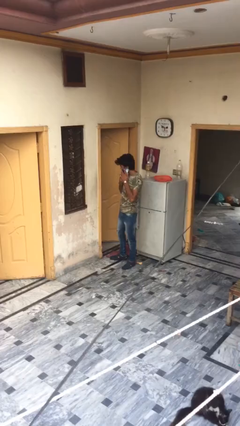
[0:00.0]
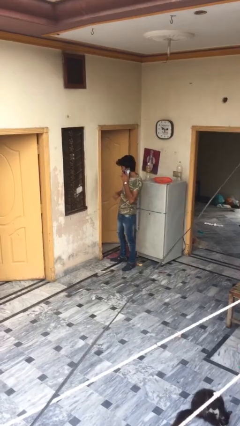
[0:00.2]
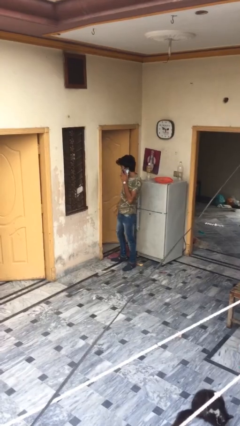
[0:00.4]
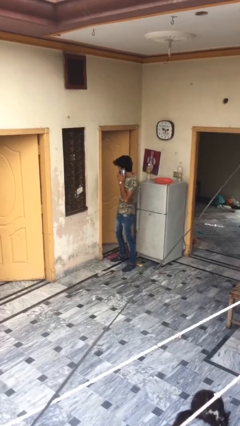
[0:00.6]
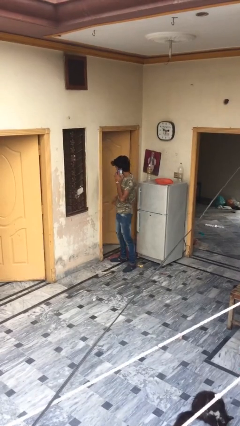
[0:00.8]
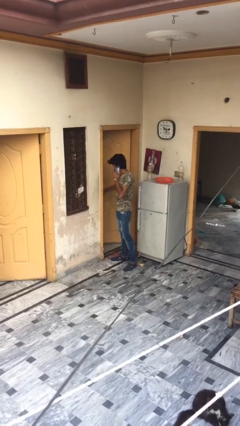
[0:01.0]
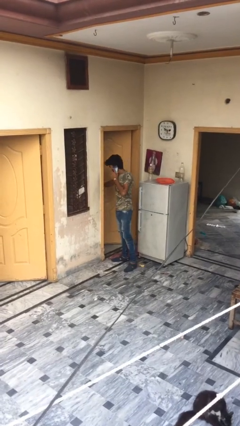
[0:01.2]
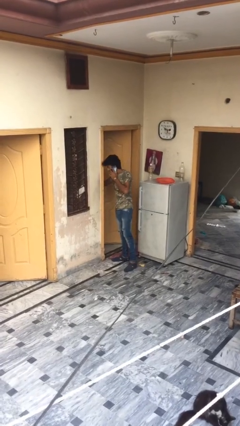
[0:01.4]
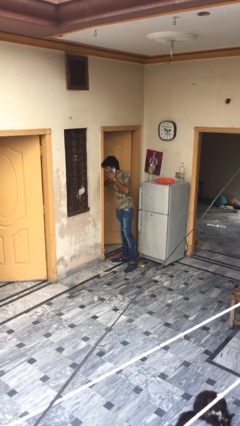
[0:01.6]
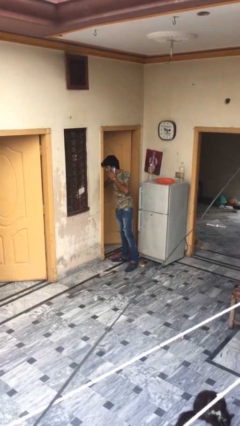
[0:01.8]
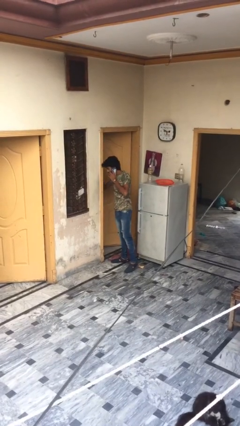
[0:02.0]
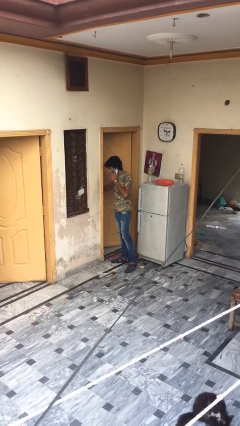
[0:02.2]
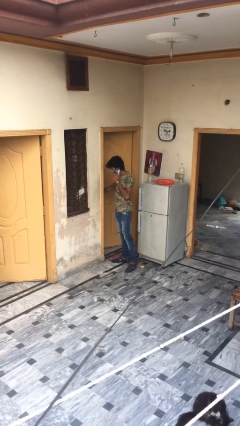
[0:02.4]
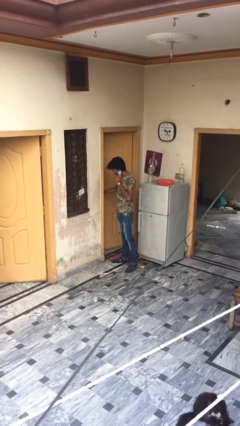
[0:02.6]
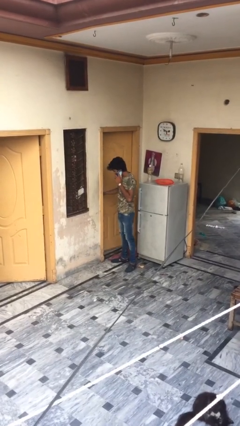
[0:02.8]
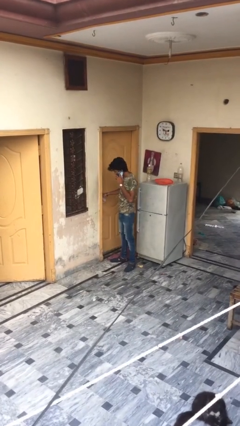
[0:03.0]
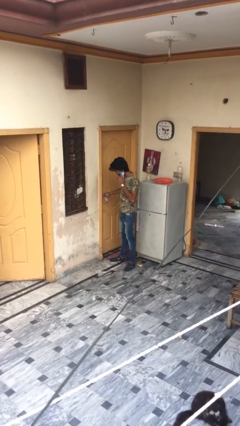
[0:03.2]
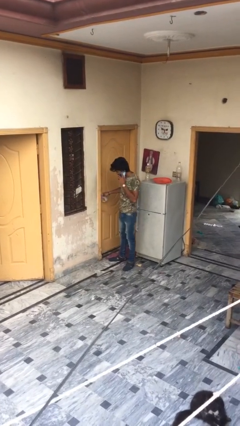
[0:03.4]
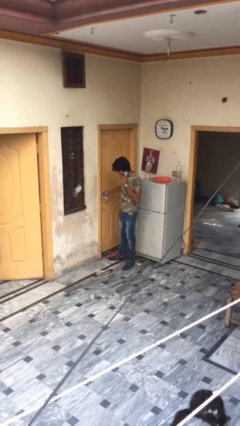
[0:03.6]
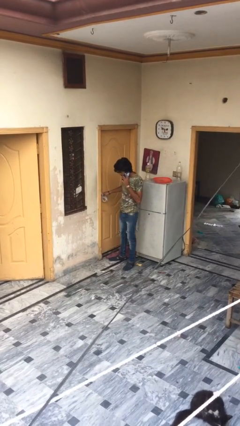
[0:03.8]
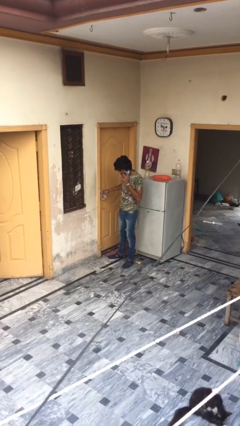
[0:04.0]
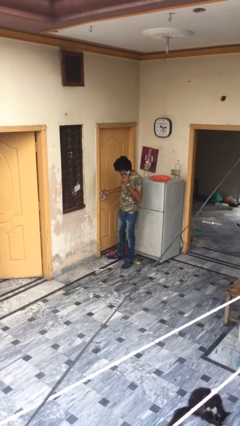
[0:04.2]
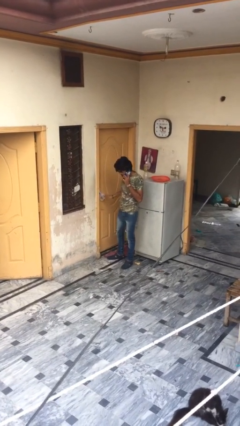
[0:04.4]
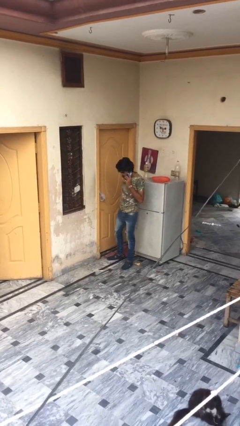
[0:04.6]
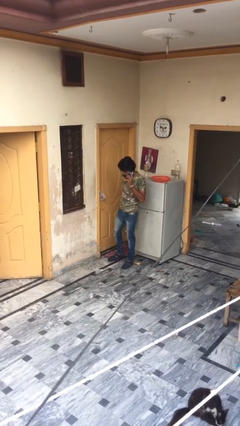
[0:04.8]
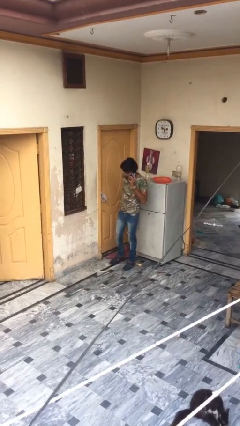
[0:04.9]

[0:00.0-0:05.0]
person closes facility door

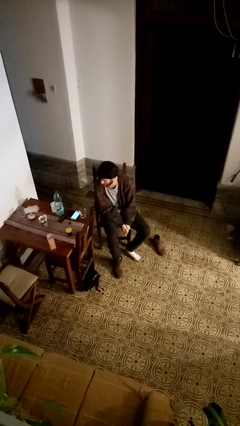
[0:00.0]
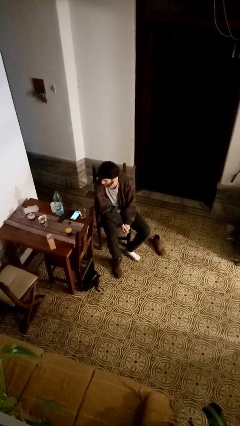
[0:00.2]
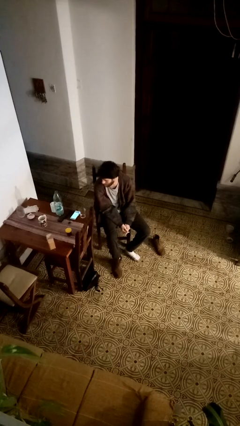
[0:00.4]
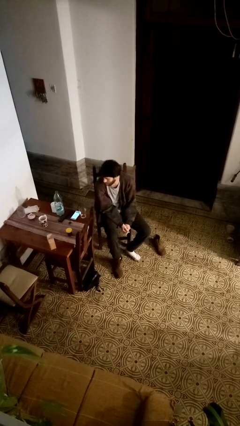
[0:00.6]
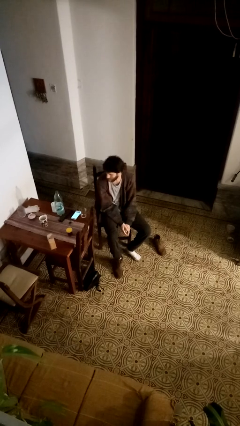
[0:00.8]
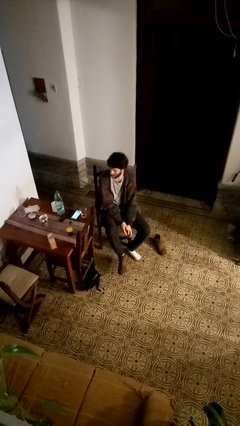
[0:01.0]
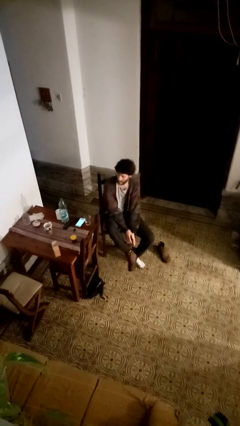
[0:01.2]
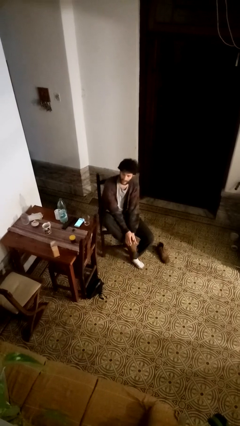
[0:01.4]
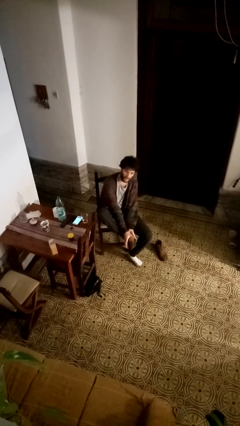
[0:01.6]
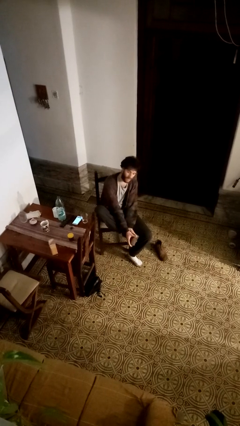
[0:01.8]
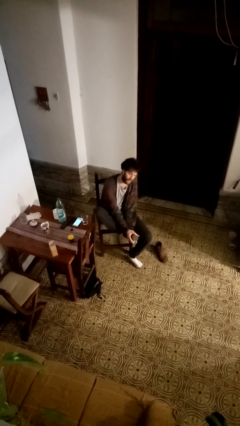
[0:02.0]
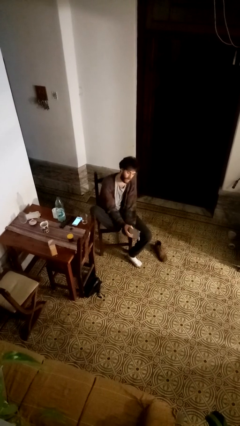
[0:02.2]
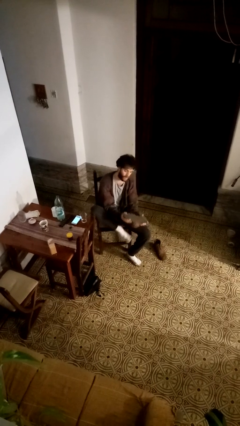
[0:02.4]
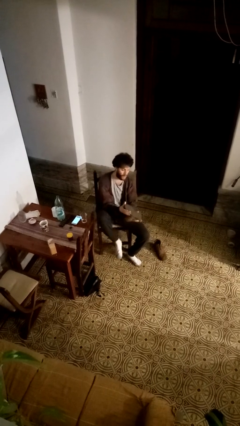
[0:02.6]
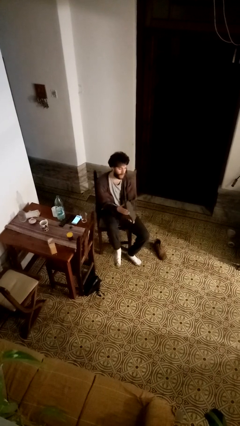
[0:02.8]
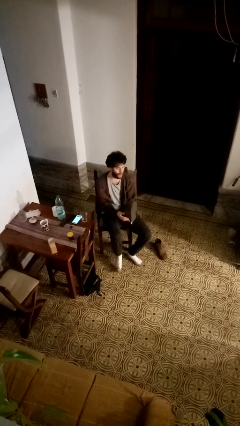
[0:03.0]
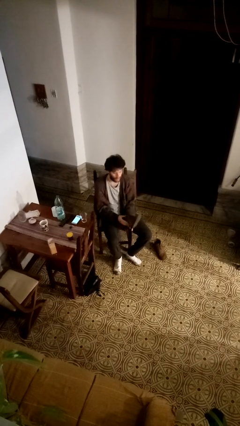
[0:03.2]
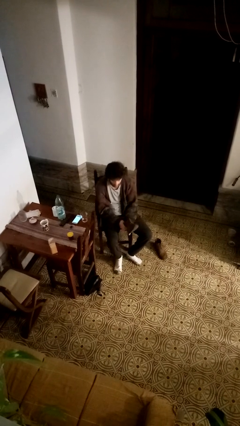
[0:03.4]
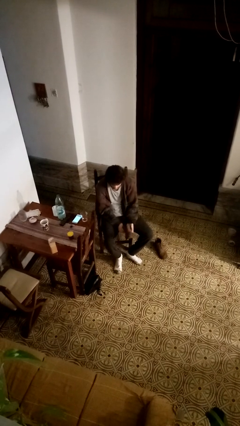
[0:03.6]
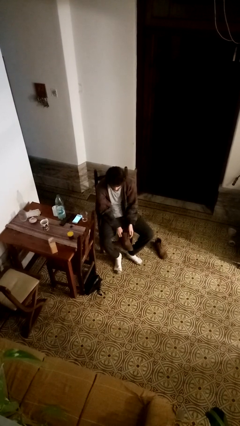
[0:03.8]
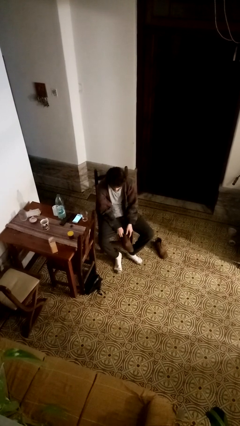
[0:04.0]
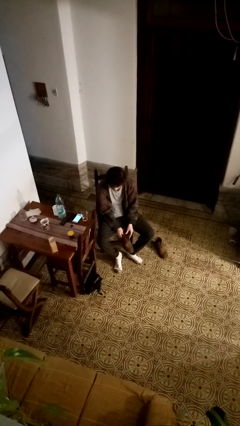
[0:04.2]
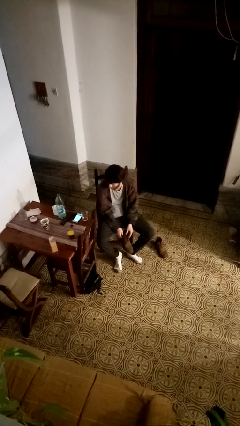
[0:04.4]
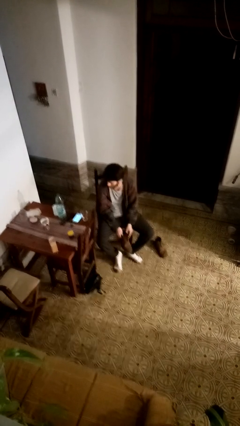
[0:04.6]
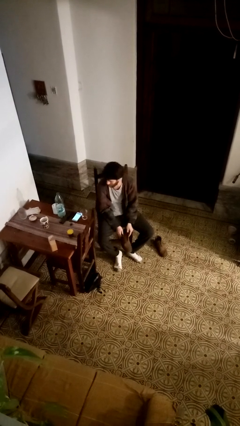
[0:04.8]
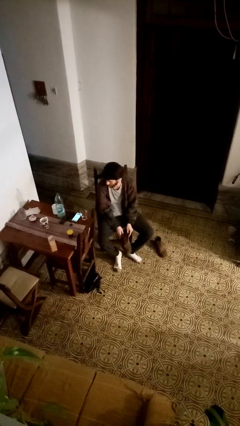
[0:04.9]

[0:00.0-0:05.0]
person takes off boots

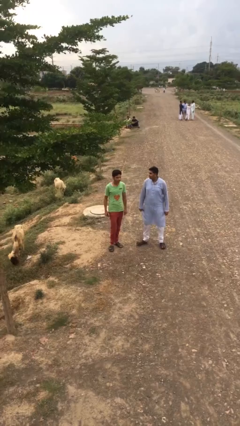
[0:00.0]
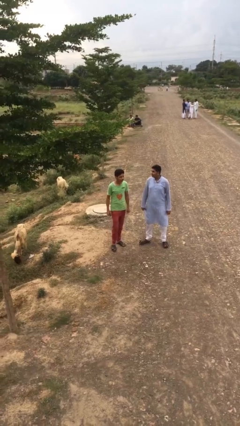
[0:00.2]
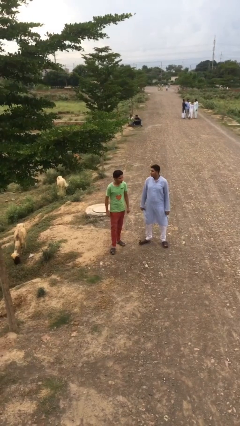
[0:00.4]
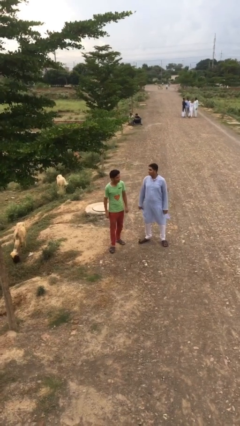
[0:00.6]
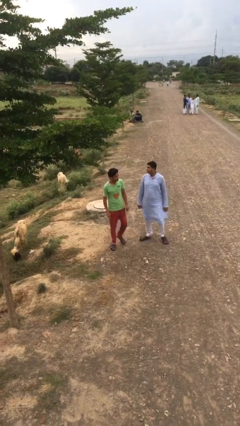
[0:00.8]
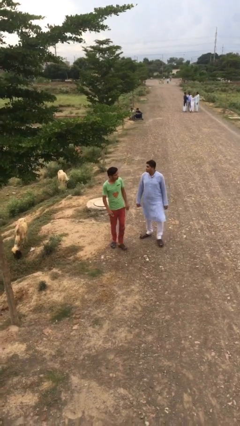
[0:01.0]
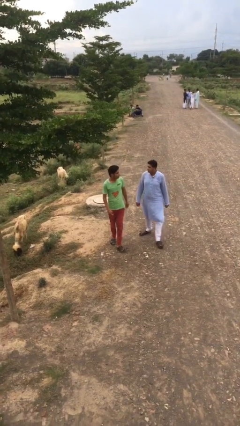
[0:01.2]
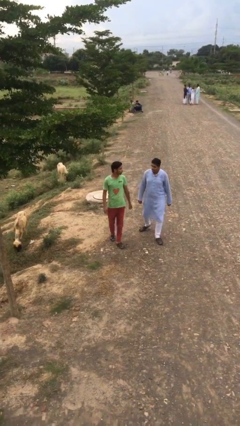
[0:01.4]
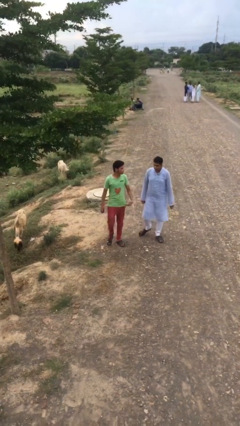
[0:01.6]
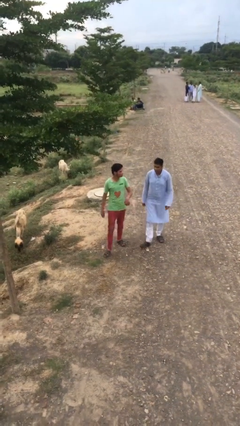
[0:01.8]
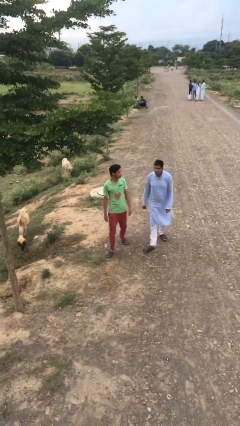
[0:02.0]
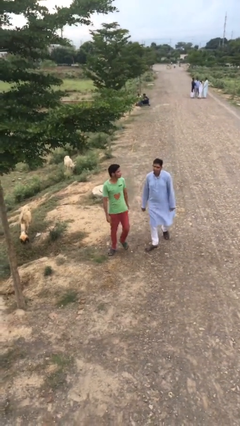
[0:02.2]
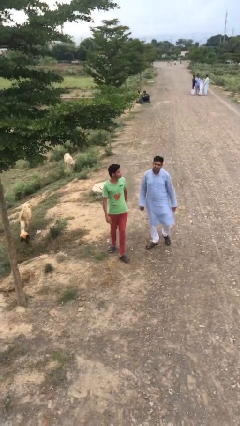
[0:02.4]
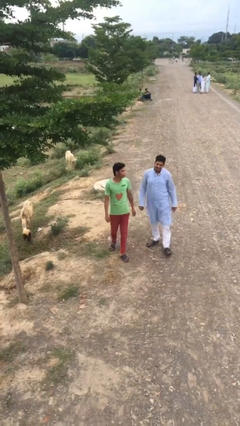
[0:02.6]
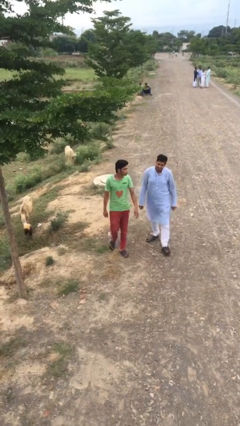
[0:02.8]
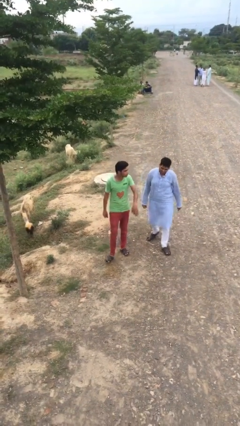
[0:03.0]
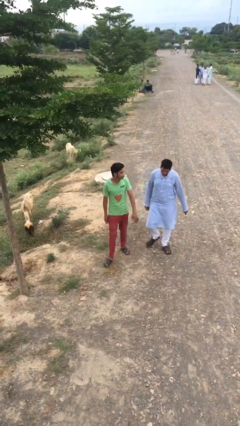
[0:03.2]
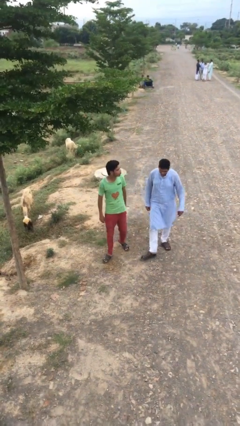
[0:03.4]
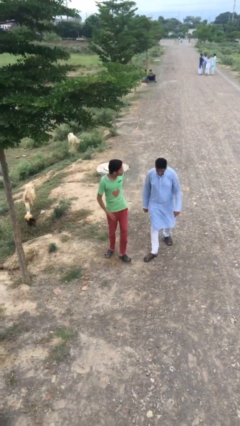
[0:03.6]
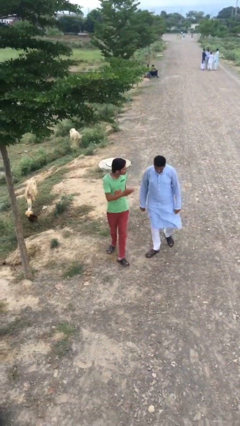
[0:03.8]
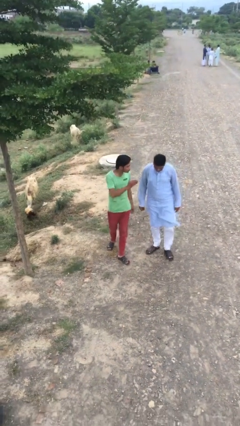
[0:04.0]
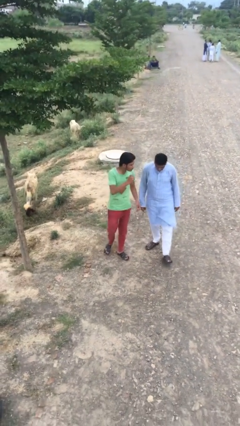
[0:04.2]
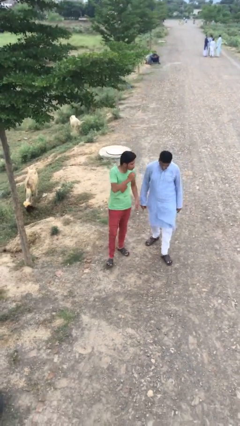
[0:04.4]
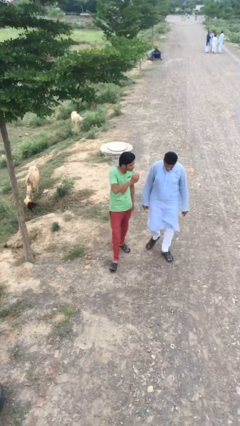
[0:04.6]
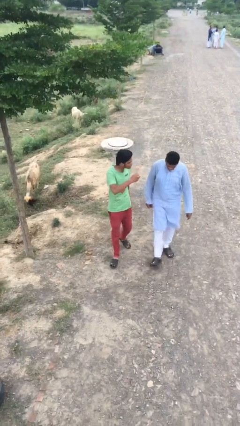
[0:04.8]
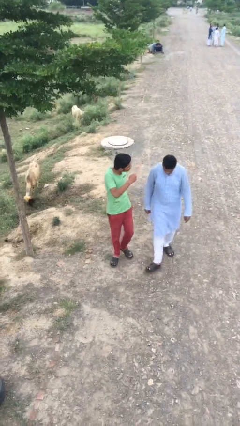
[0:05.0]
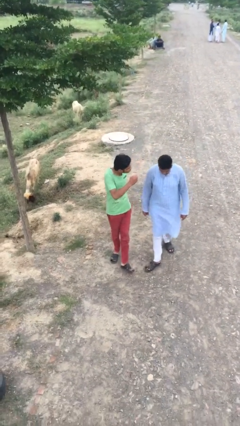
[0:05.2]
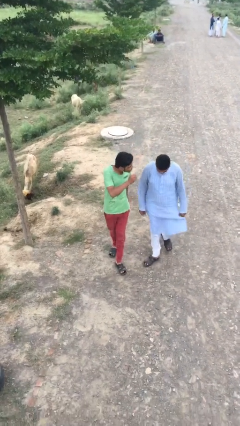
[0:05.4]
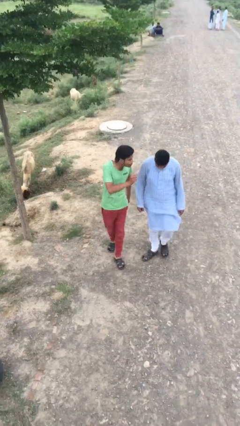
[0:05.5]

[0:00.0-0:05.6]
person talks to person

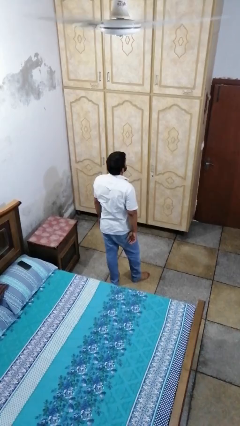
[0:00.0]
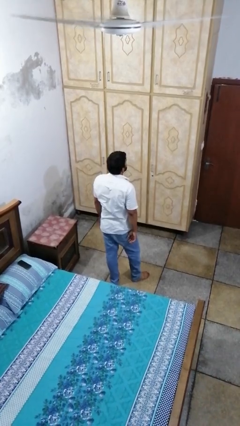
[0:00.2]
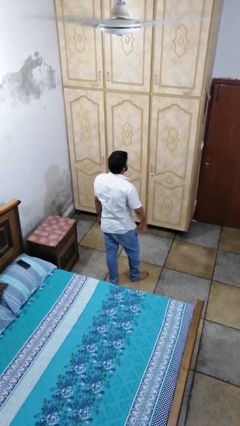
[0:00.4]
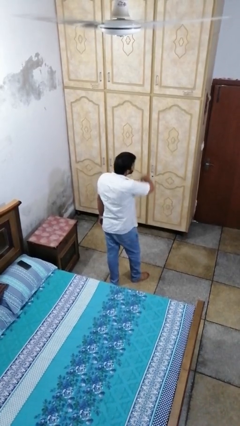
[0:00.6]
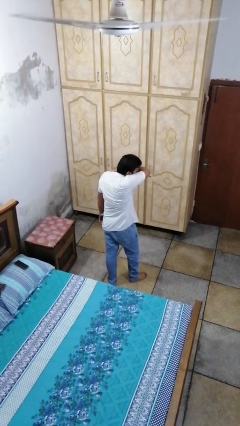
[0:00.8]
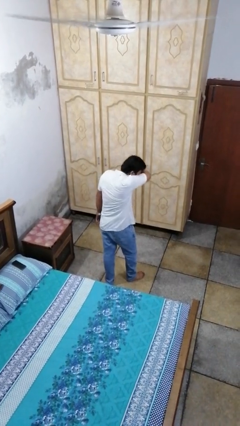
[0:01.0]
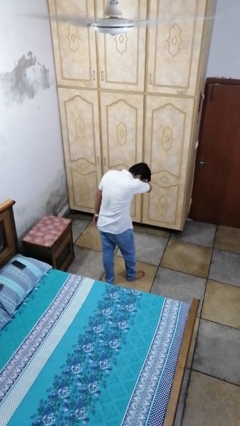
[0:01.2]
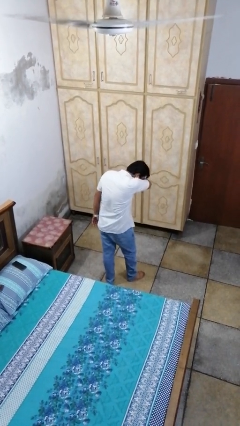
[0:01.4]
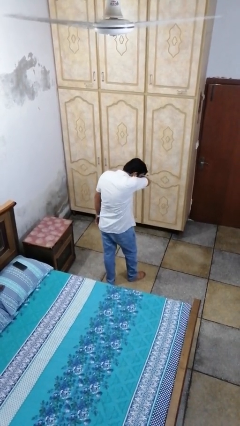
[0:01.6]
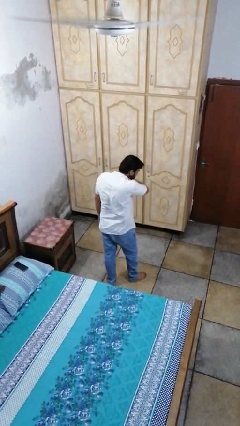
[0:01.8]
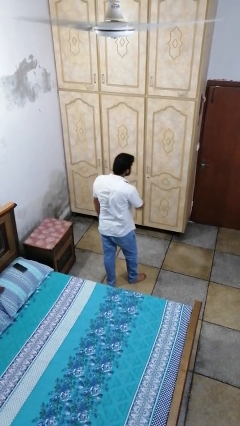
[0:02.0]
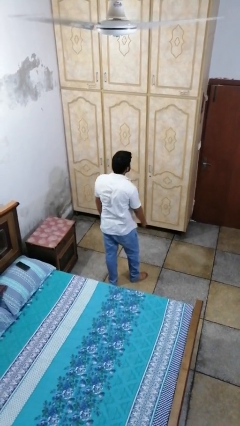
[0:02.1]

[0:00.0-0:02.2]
person sneezes into arm
